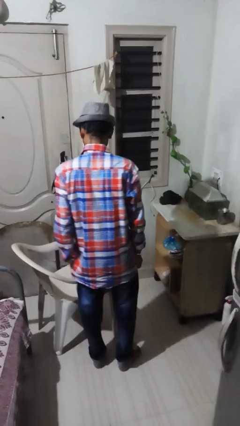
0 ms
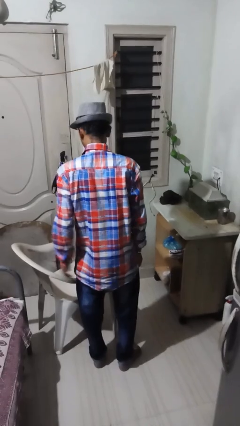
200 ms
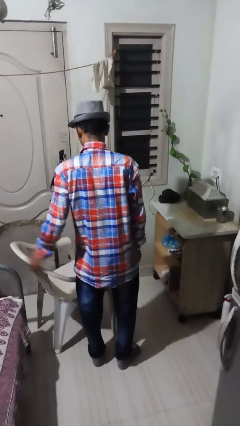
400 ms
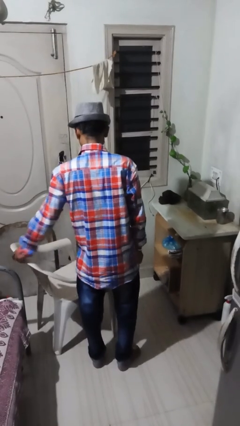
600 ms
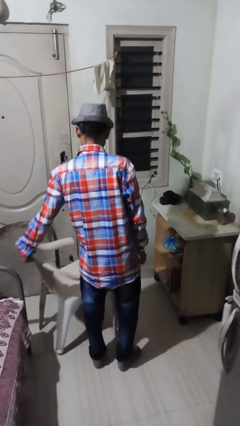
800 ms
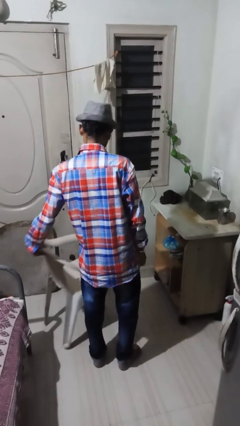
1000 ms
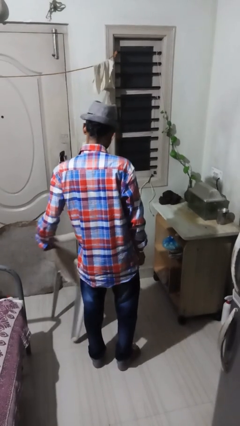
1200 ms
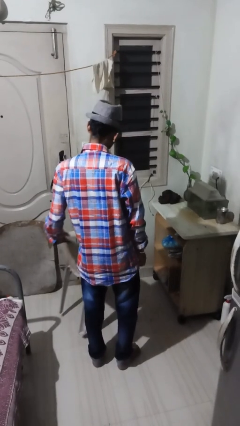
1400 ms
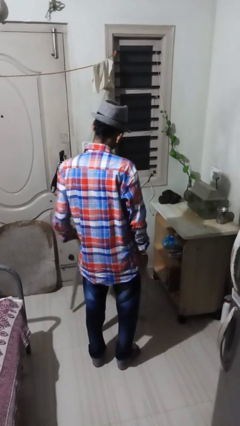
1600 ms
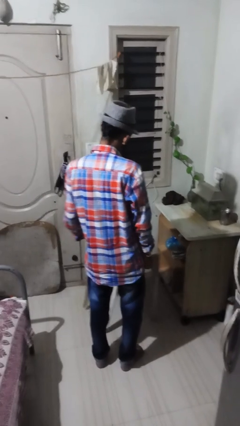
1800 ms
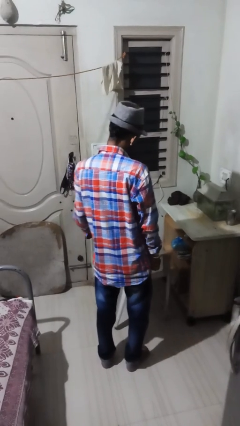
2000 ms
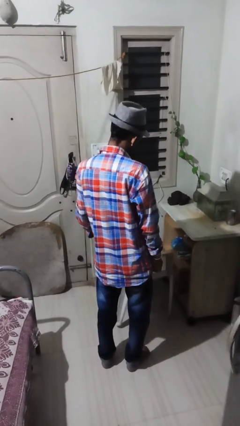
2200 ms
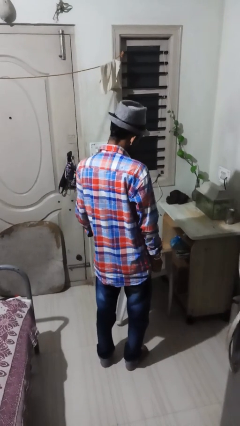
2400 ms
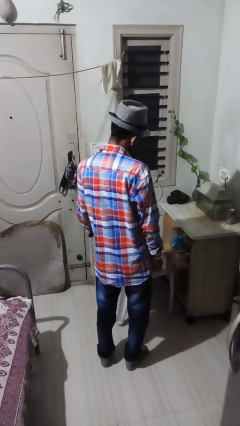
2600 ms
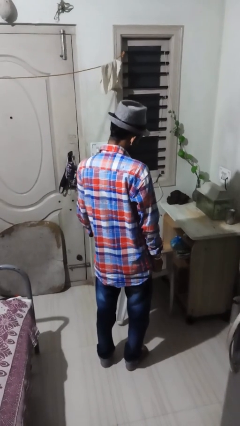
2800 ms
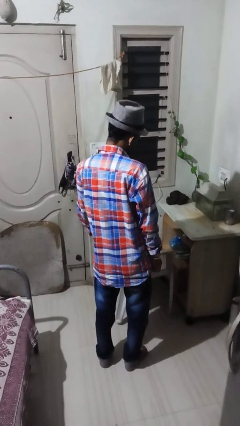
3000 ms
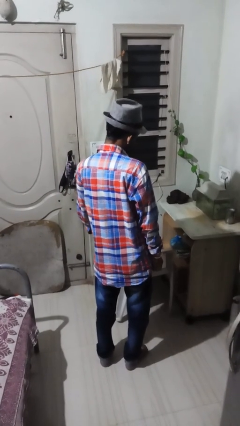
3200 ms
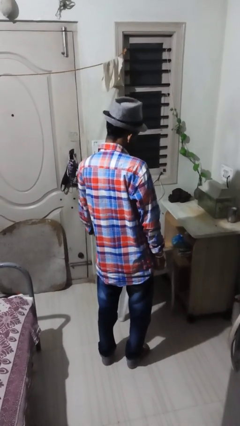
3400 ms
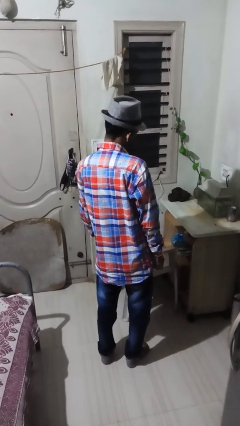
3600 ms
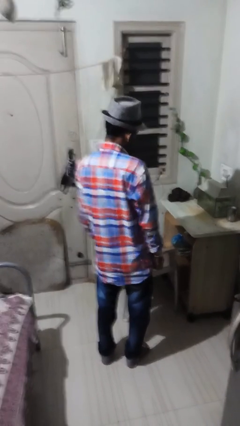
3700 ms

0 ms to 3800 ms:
person pushes in chair

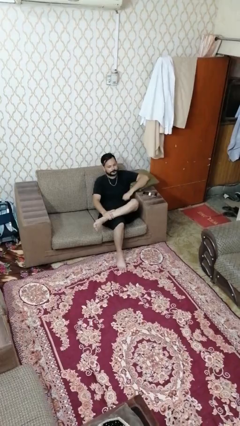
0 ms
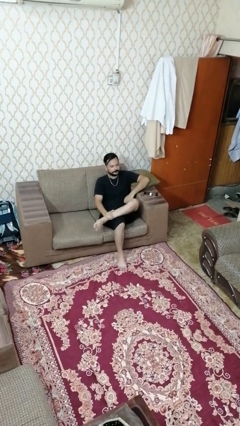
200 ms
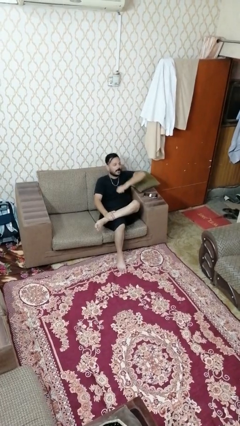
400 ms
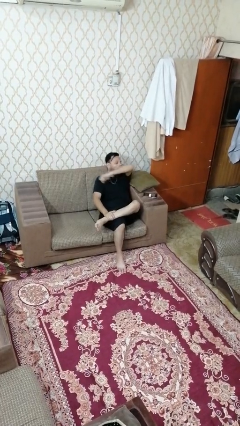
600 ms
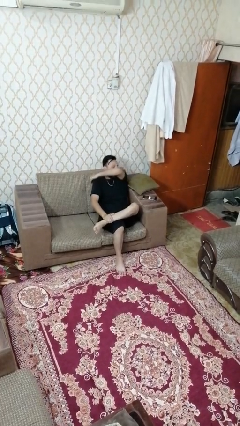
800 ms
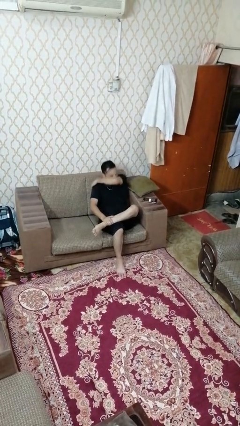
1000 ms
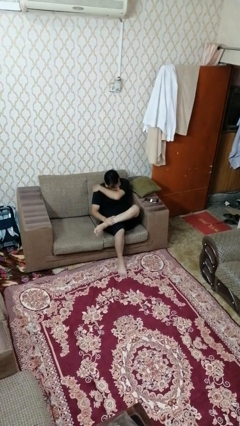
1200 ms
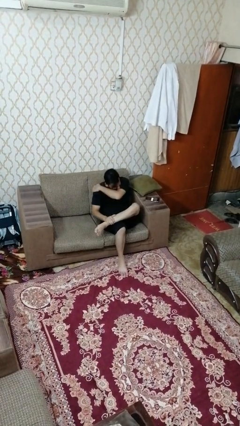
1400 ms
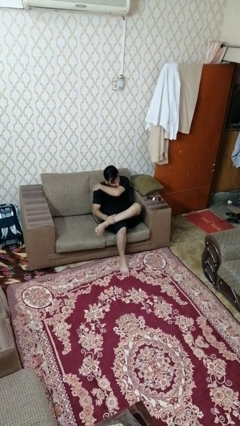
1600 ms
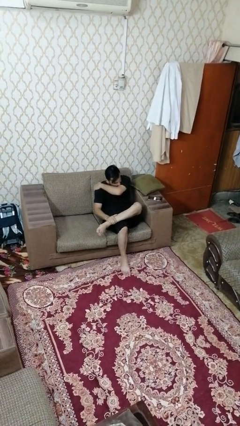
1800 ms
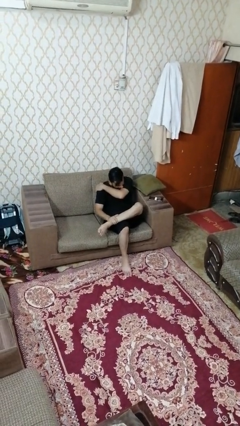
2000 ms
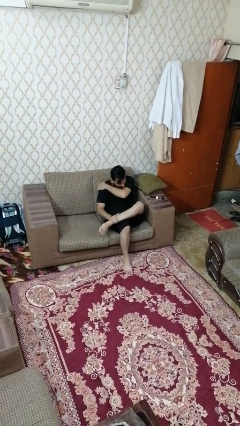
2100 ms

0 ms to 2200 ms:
person sneezes into arm

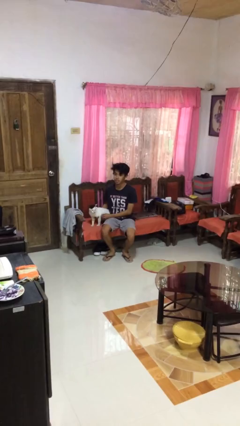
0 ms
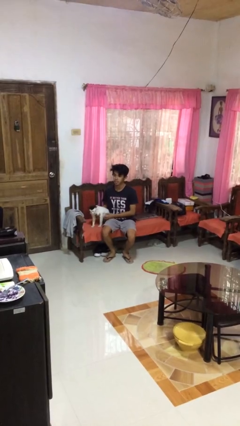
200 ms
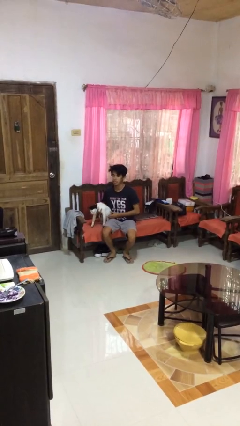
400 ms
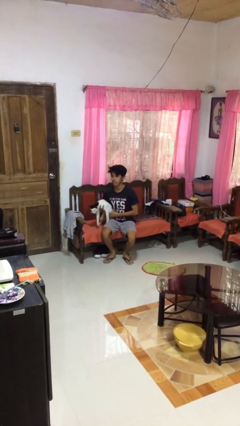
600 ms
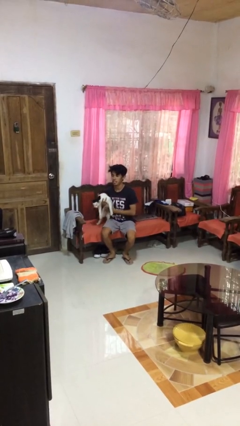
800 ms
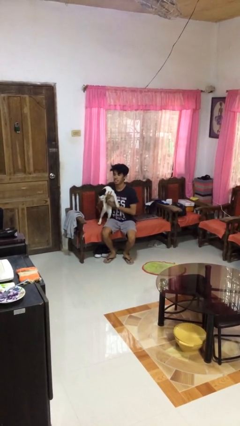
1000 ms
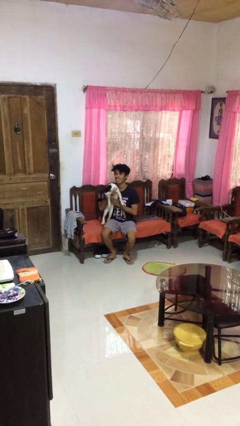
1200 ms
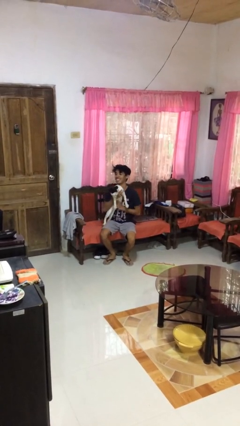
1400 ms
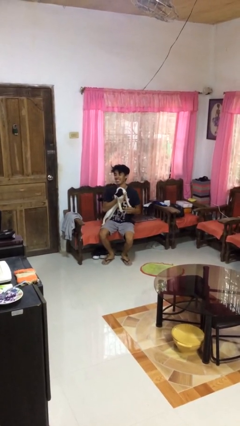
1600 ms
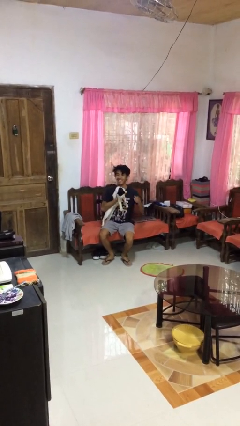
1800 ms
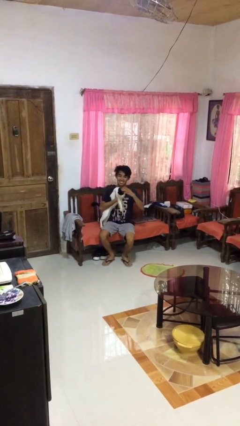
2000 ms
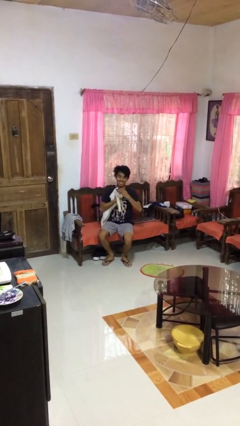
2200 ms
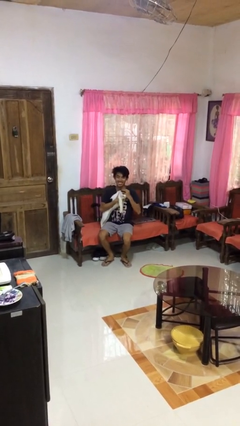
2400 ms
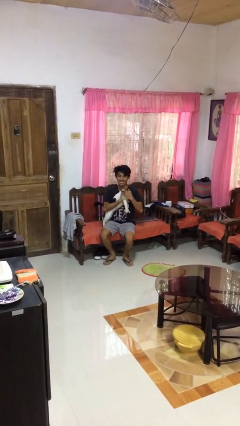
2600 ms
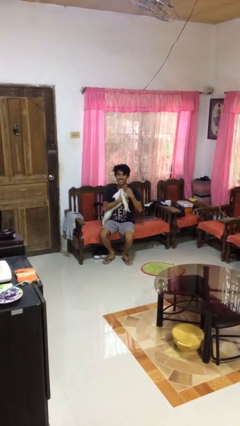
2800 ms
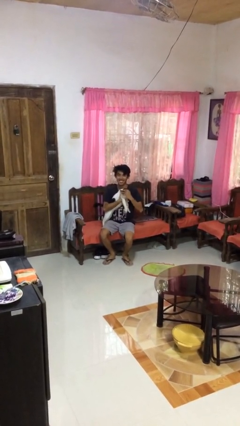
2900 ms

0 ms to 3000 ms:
person hugs cat

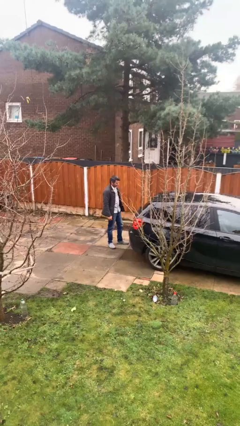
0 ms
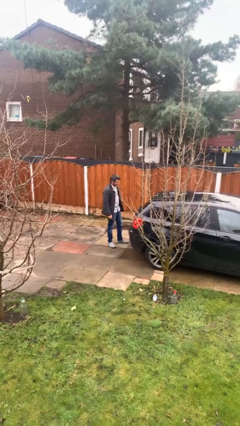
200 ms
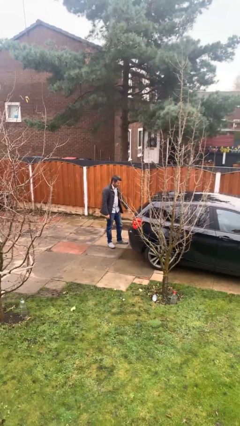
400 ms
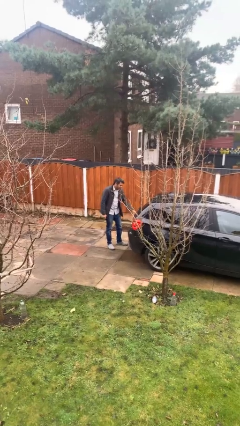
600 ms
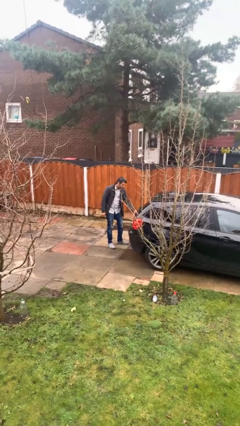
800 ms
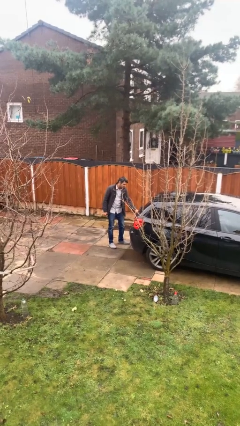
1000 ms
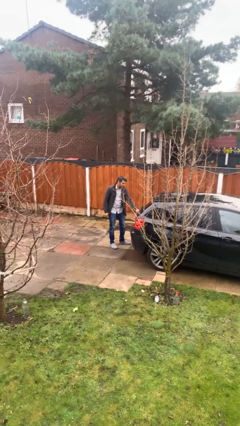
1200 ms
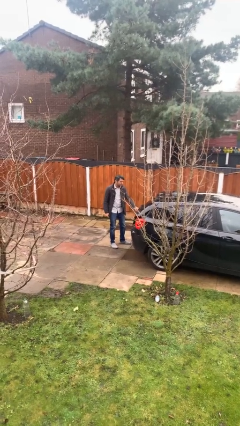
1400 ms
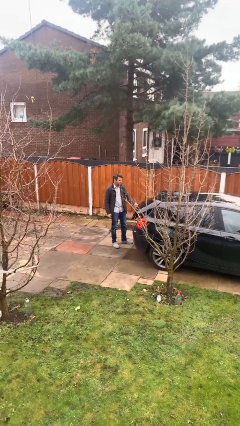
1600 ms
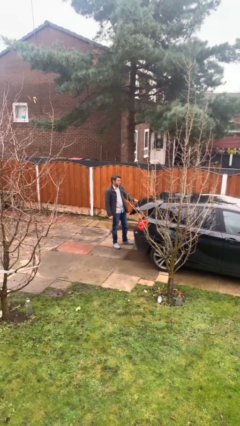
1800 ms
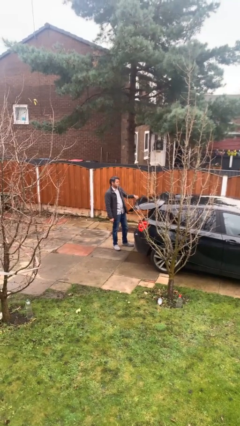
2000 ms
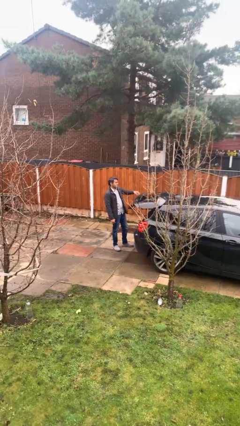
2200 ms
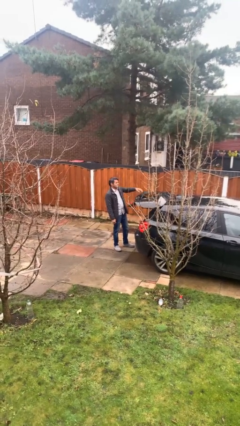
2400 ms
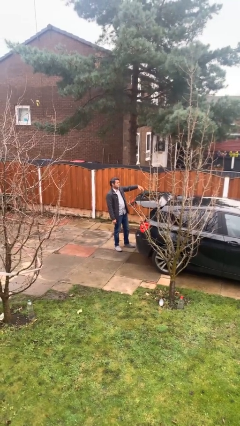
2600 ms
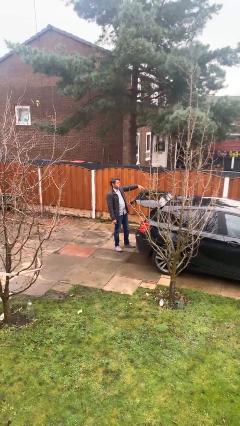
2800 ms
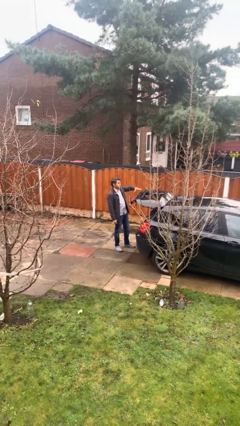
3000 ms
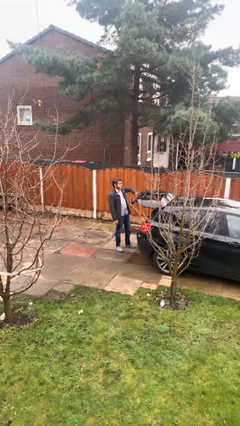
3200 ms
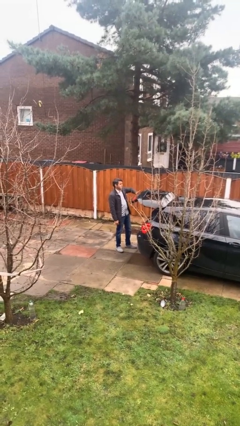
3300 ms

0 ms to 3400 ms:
person opens car trunk

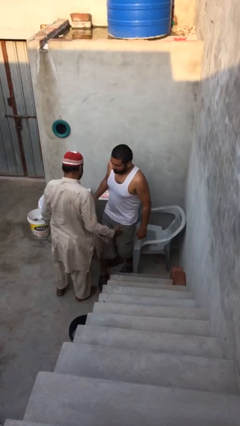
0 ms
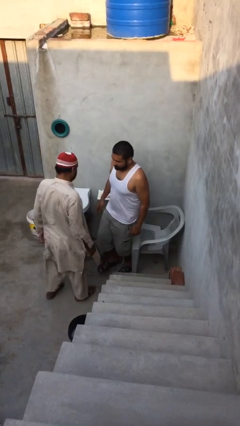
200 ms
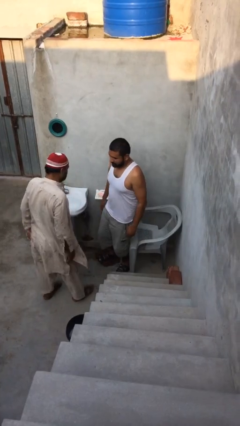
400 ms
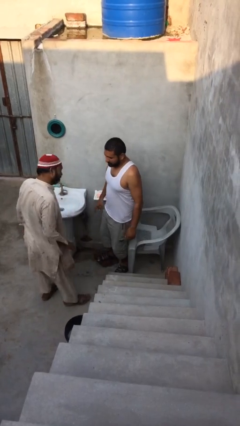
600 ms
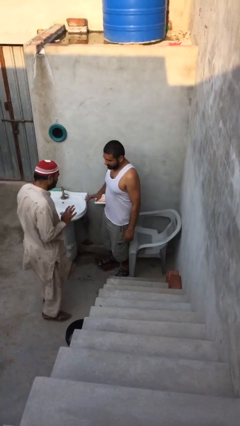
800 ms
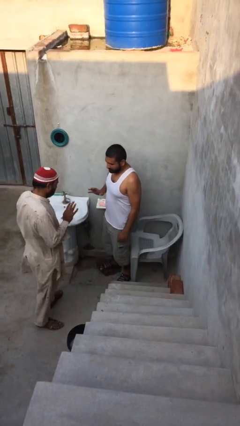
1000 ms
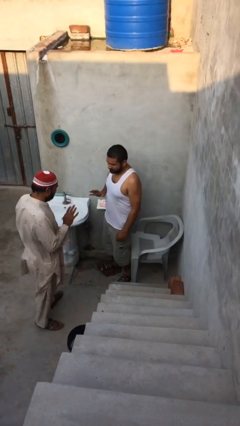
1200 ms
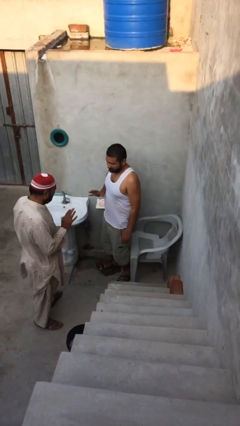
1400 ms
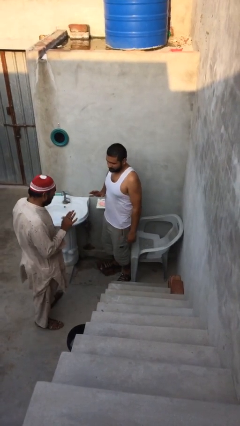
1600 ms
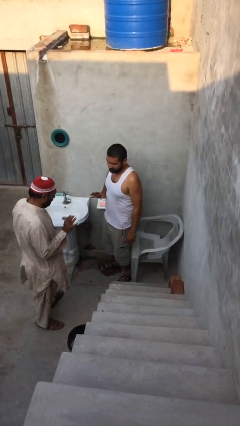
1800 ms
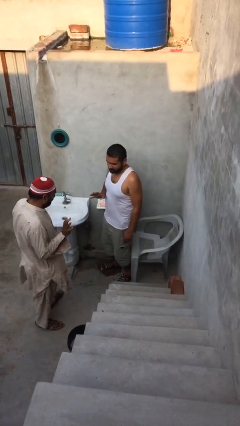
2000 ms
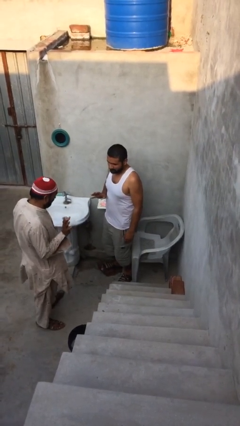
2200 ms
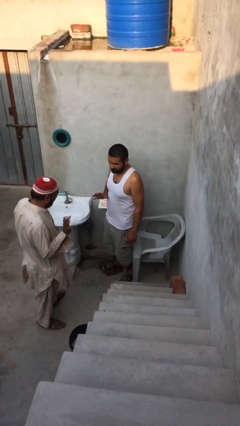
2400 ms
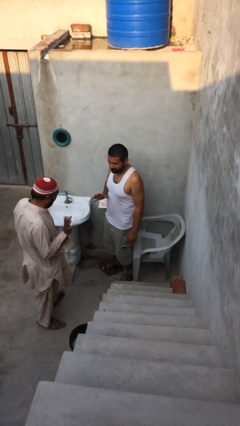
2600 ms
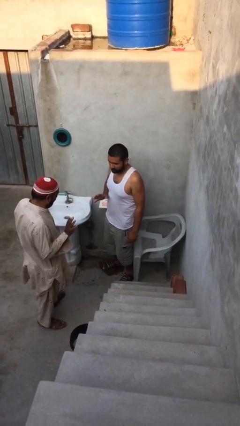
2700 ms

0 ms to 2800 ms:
person talks to person

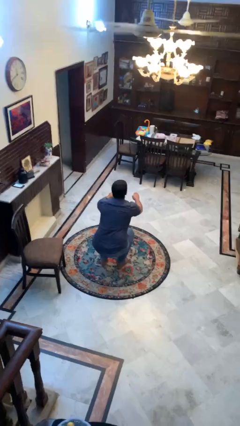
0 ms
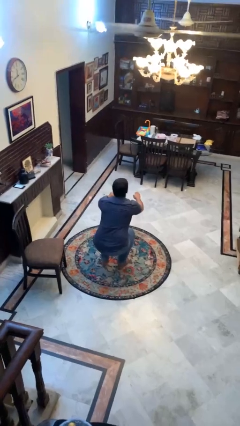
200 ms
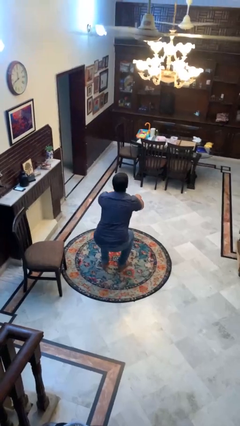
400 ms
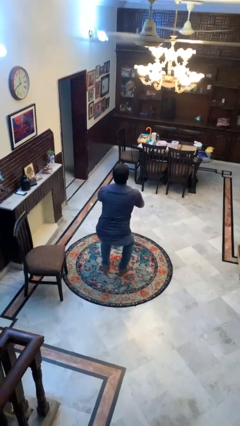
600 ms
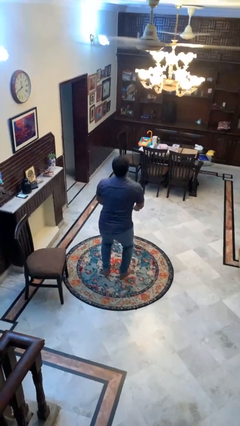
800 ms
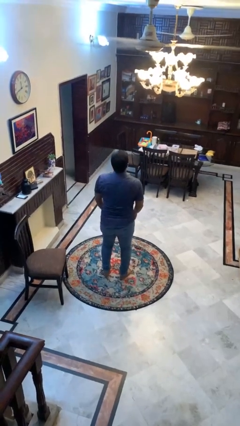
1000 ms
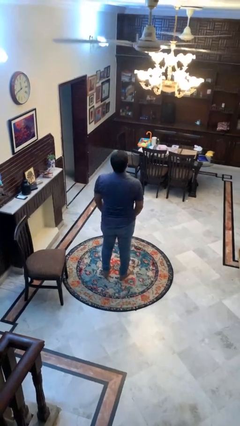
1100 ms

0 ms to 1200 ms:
person stands up

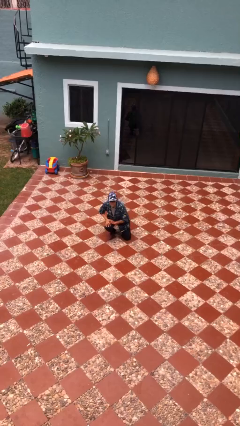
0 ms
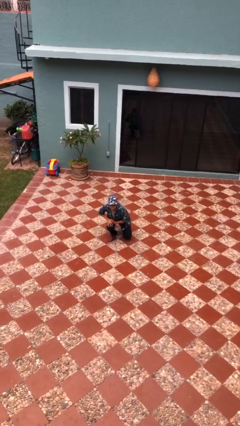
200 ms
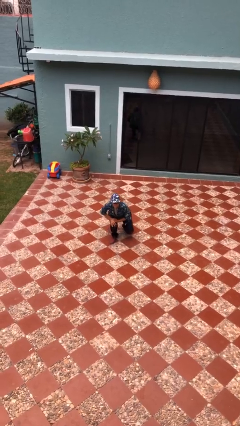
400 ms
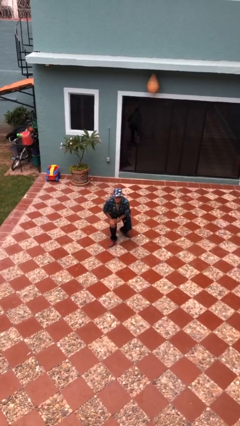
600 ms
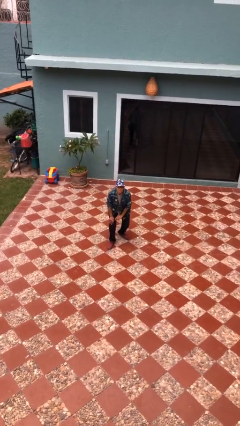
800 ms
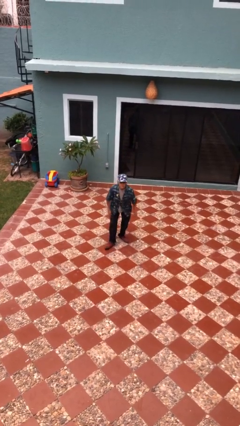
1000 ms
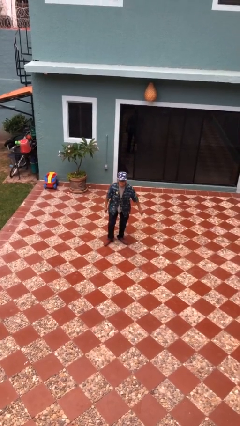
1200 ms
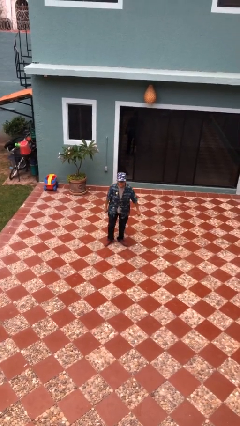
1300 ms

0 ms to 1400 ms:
person stands up from floor
